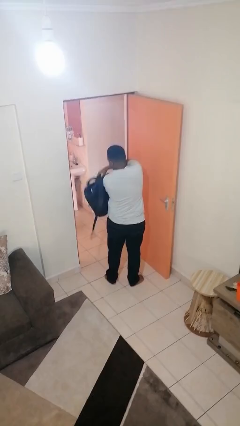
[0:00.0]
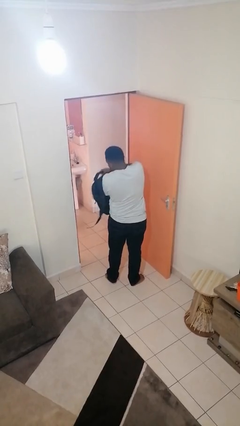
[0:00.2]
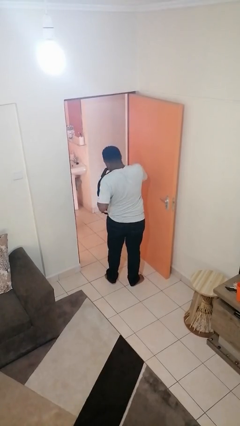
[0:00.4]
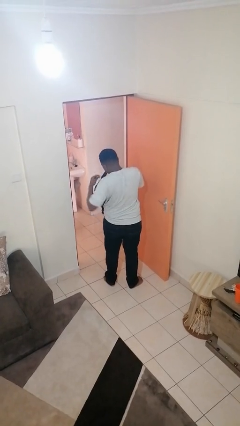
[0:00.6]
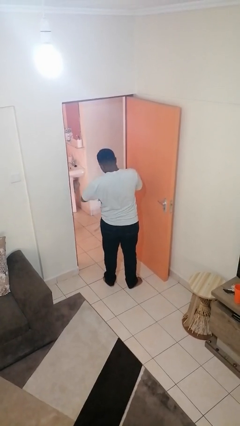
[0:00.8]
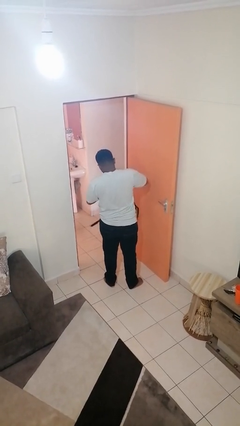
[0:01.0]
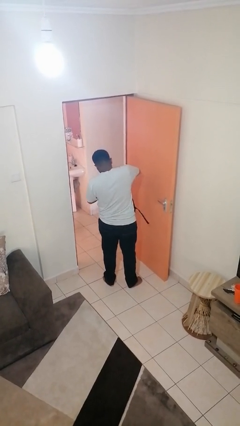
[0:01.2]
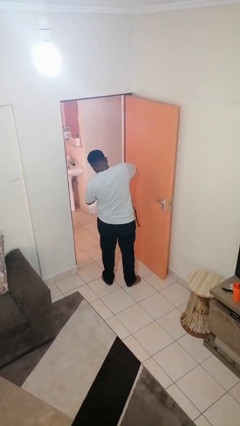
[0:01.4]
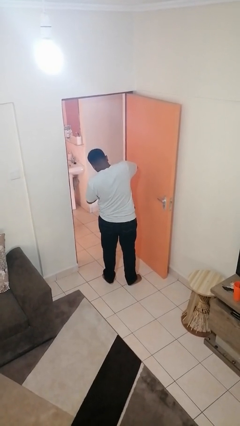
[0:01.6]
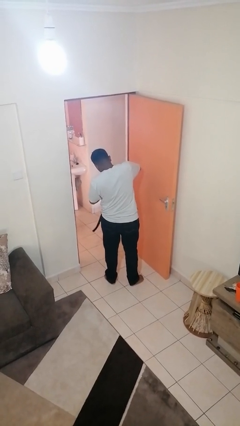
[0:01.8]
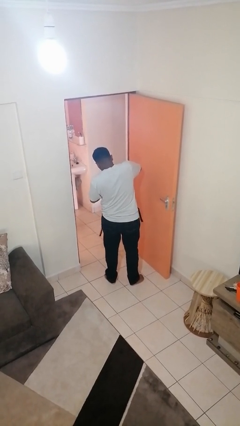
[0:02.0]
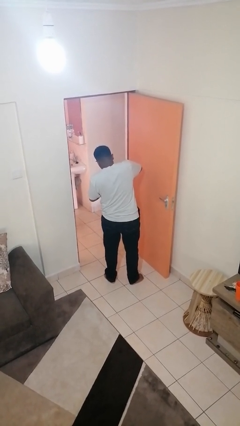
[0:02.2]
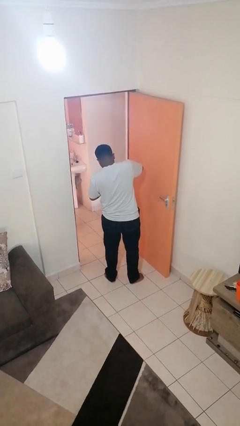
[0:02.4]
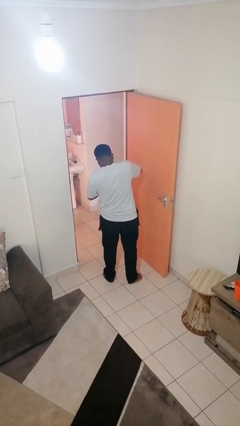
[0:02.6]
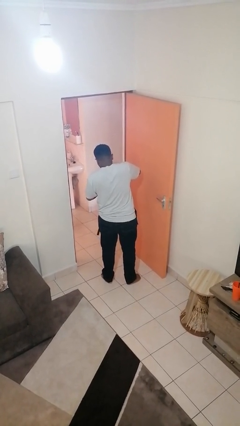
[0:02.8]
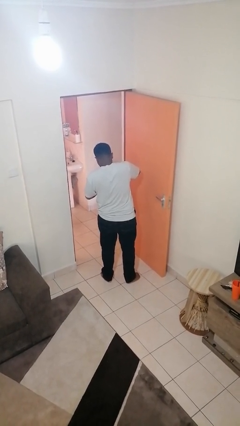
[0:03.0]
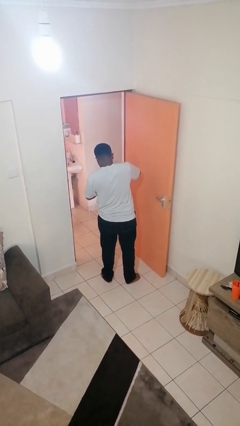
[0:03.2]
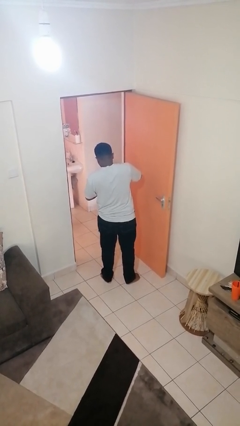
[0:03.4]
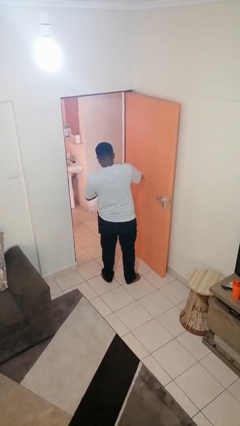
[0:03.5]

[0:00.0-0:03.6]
person searches in backpack

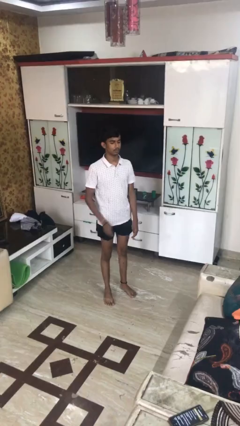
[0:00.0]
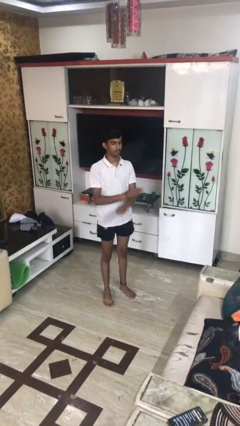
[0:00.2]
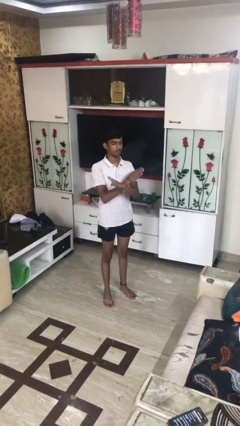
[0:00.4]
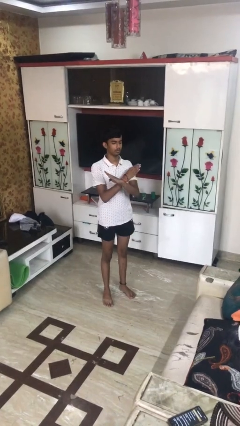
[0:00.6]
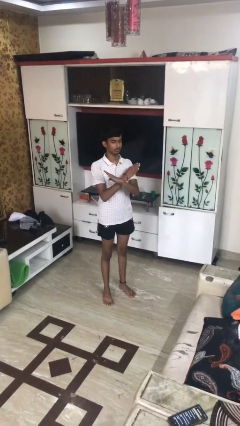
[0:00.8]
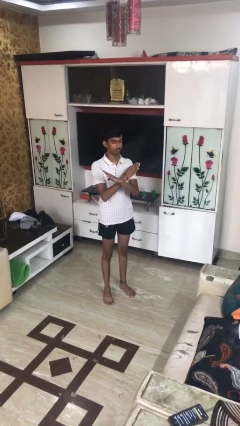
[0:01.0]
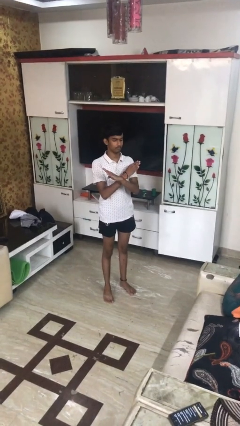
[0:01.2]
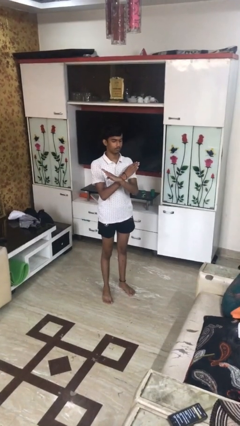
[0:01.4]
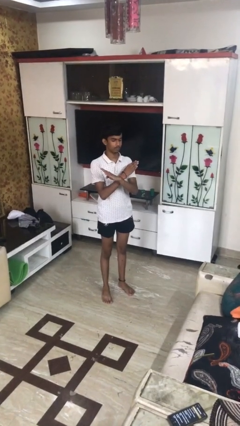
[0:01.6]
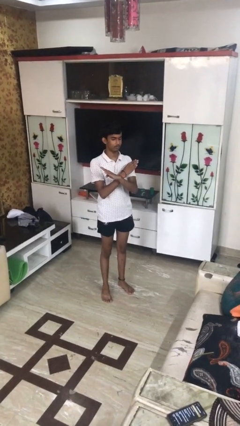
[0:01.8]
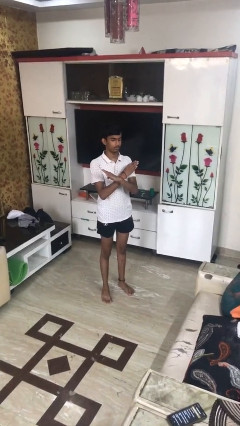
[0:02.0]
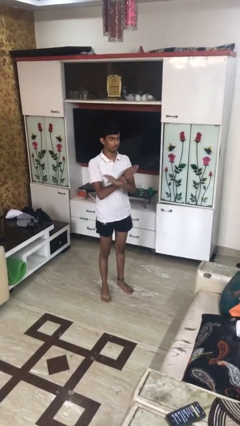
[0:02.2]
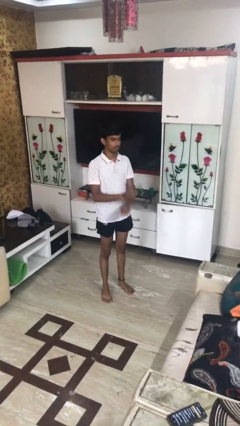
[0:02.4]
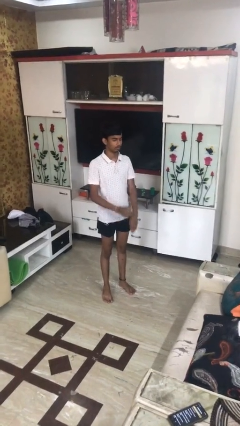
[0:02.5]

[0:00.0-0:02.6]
person gestures arms x

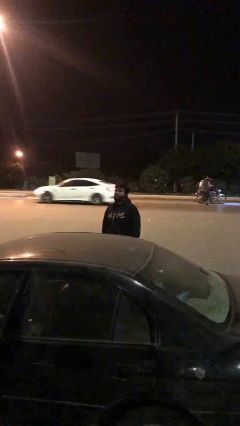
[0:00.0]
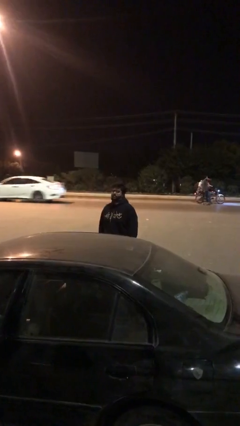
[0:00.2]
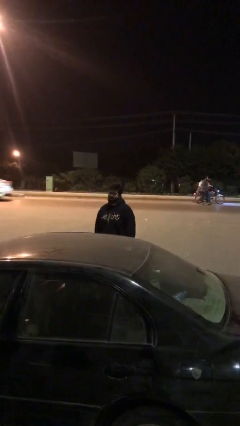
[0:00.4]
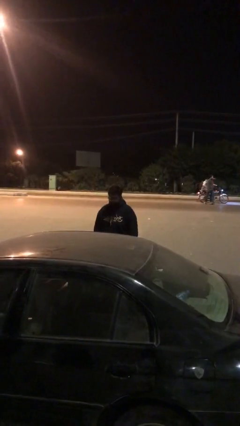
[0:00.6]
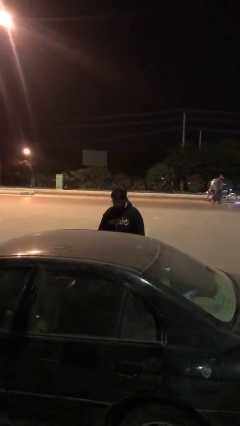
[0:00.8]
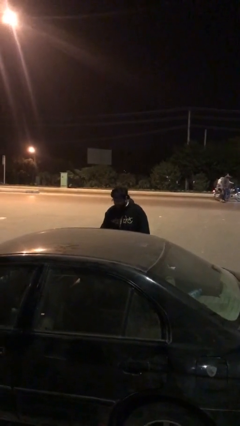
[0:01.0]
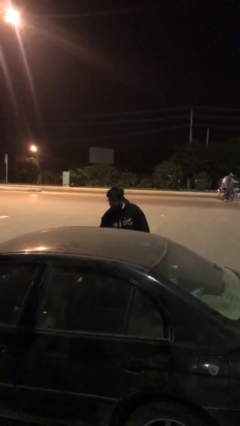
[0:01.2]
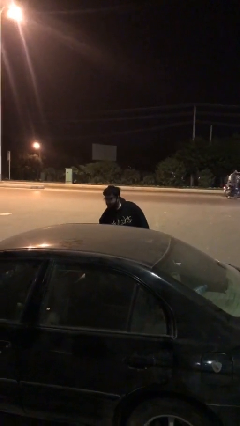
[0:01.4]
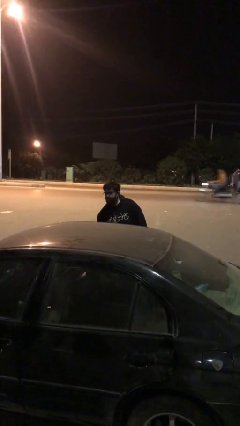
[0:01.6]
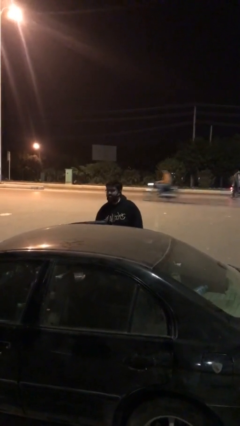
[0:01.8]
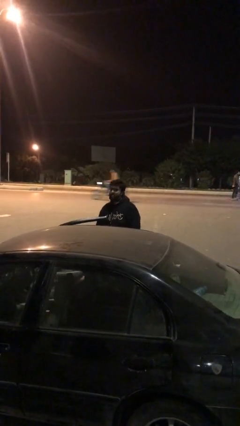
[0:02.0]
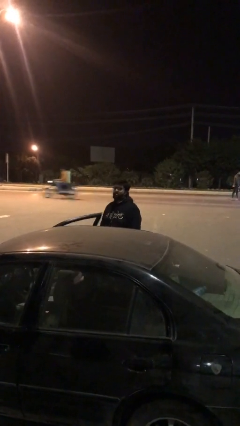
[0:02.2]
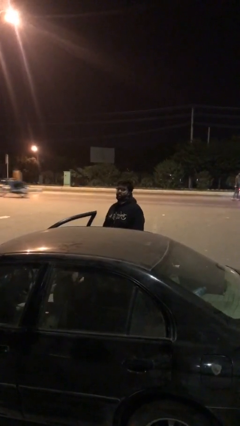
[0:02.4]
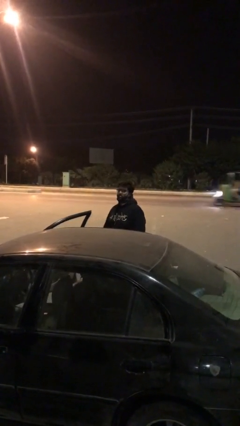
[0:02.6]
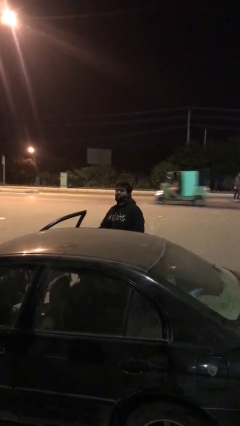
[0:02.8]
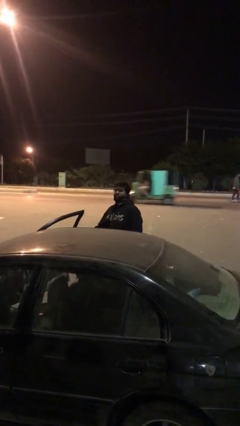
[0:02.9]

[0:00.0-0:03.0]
person opens car door

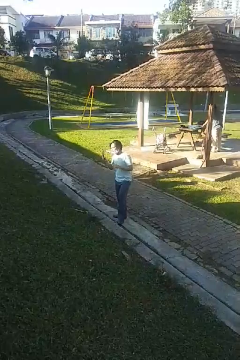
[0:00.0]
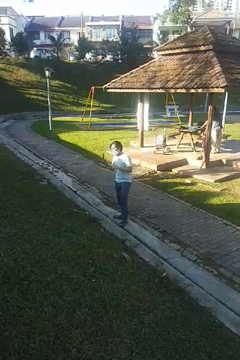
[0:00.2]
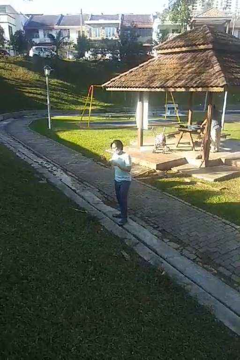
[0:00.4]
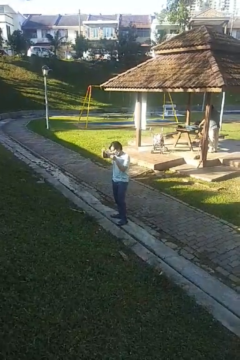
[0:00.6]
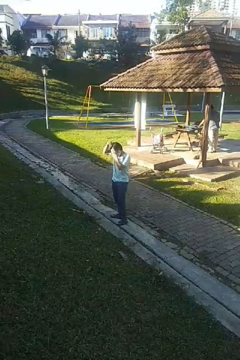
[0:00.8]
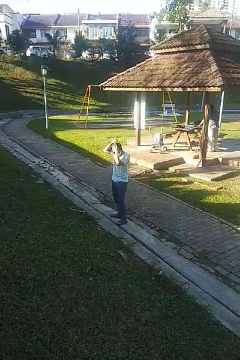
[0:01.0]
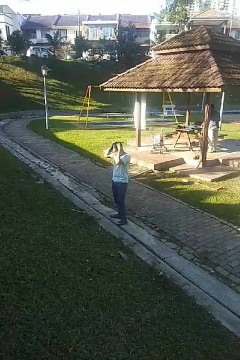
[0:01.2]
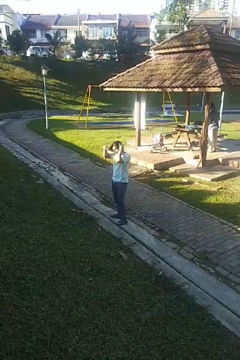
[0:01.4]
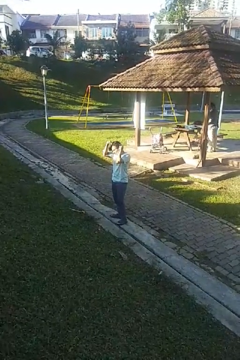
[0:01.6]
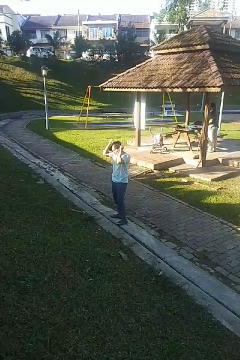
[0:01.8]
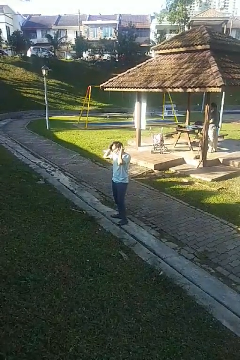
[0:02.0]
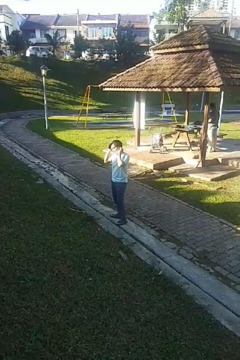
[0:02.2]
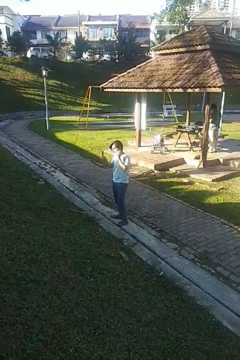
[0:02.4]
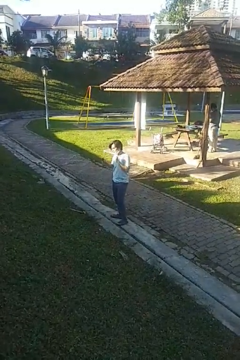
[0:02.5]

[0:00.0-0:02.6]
person brushes hair

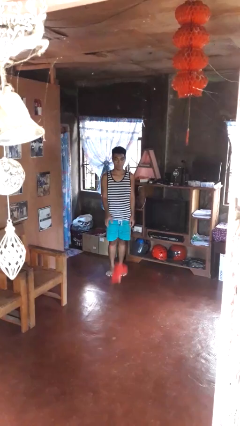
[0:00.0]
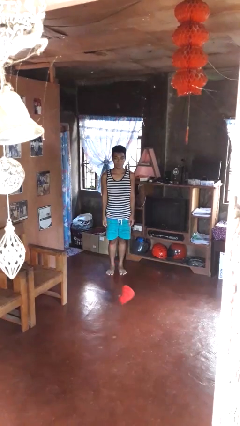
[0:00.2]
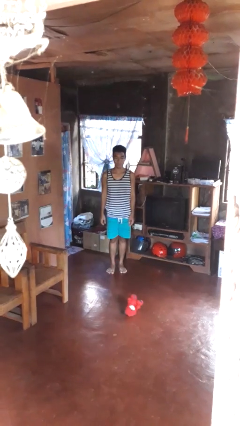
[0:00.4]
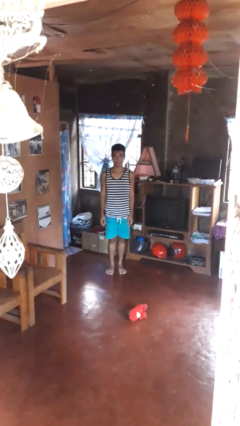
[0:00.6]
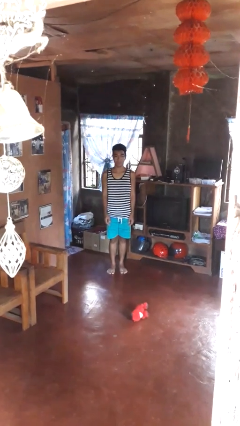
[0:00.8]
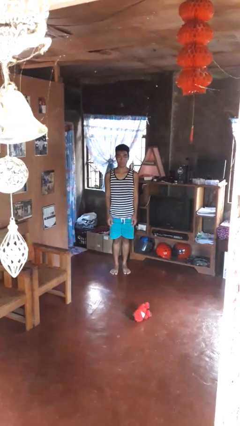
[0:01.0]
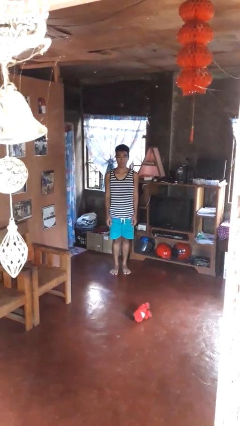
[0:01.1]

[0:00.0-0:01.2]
person throws object to ground

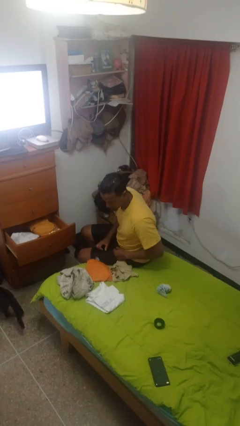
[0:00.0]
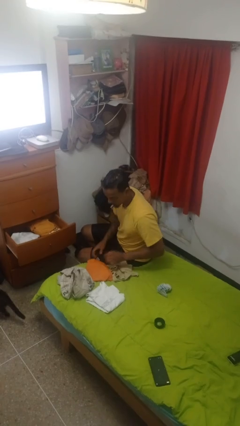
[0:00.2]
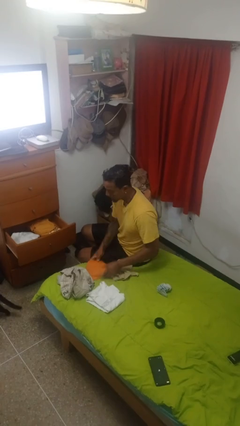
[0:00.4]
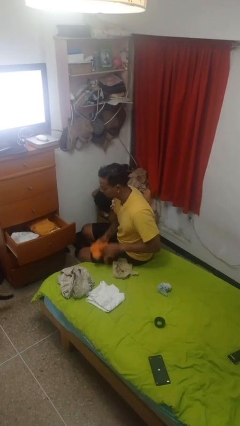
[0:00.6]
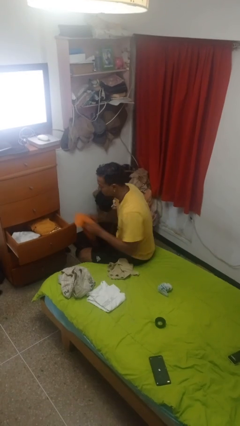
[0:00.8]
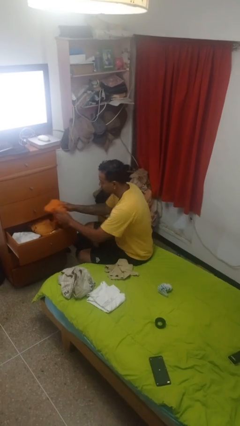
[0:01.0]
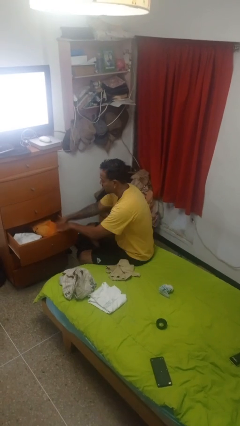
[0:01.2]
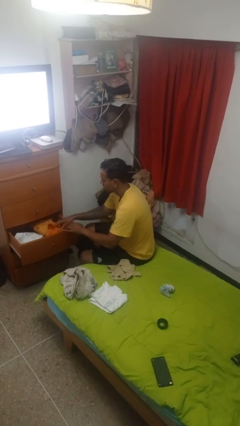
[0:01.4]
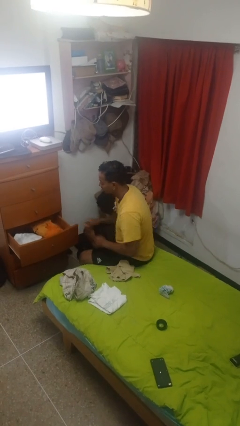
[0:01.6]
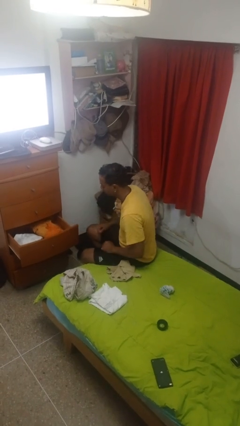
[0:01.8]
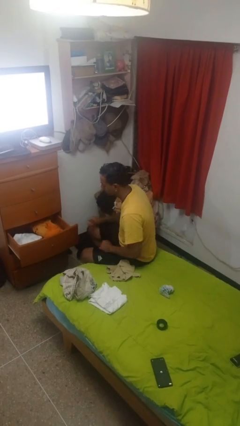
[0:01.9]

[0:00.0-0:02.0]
person puts clothes into dresser

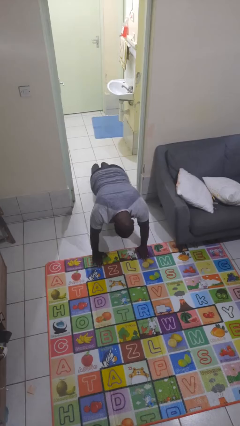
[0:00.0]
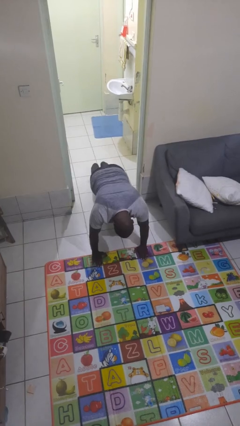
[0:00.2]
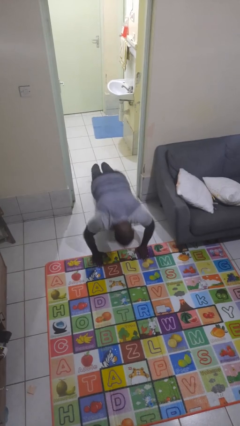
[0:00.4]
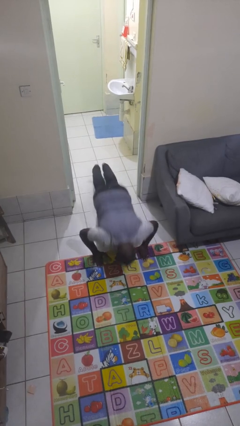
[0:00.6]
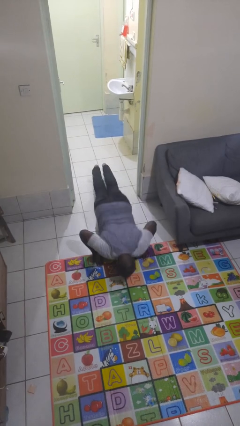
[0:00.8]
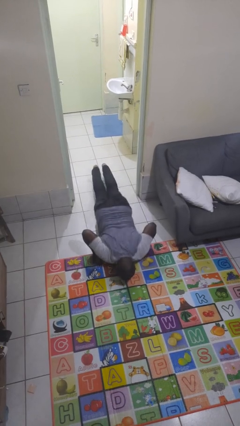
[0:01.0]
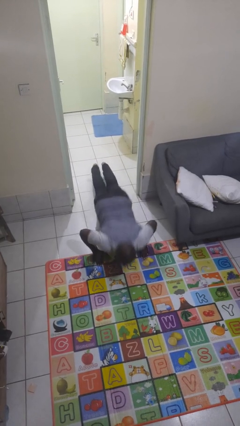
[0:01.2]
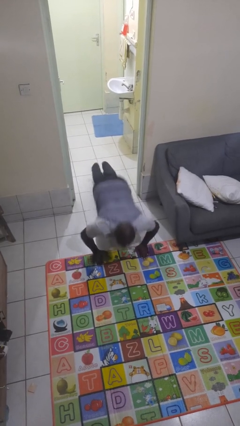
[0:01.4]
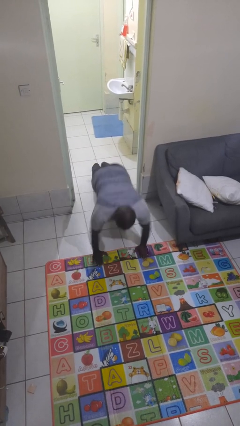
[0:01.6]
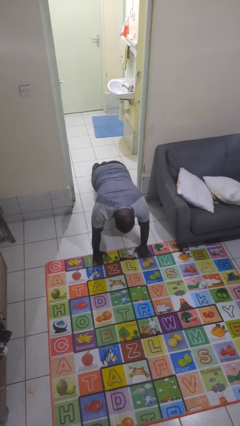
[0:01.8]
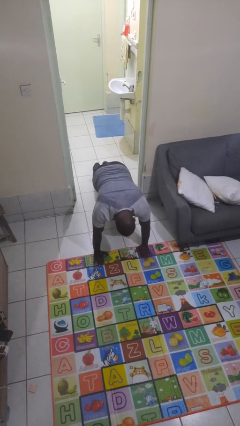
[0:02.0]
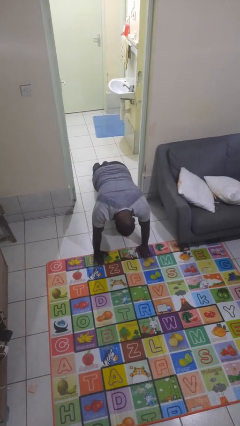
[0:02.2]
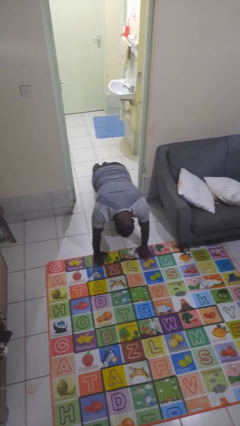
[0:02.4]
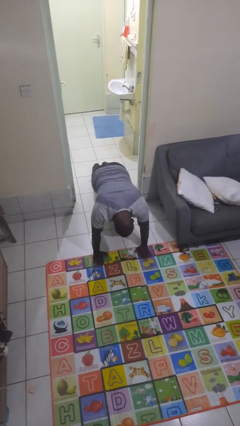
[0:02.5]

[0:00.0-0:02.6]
person exercises with pushup
